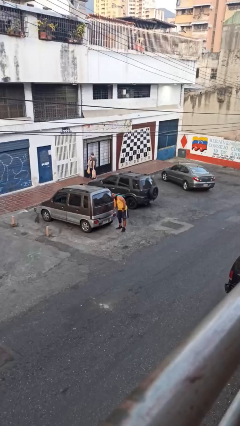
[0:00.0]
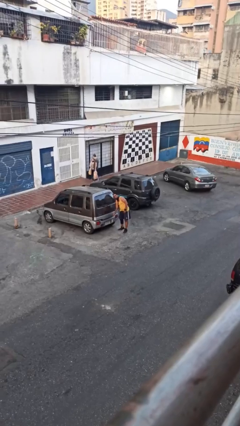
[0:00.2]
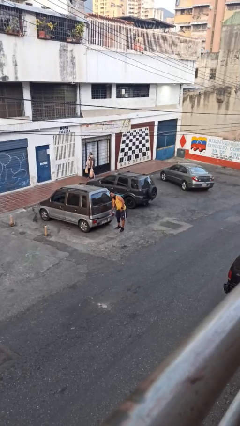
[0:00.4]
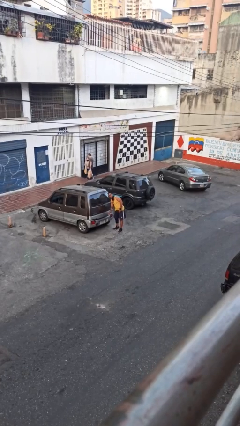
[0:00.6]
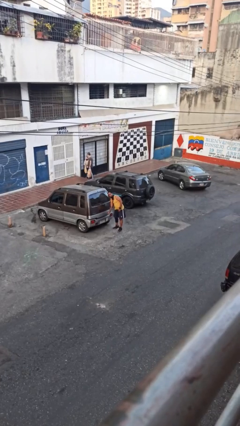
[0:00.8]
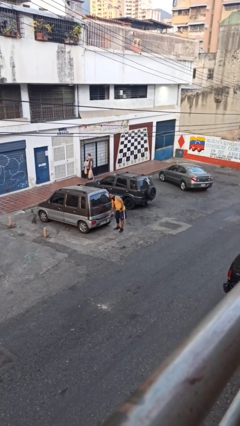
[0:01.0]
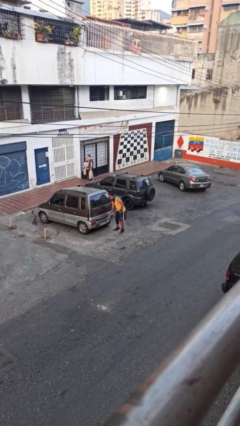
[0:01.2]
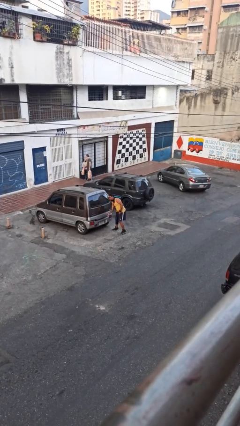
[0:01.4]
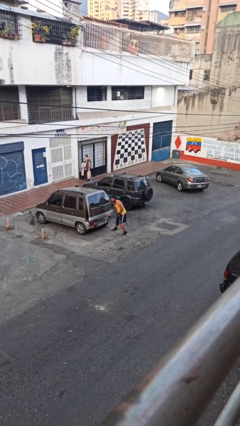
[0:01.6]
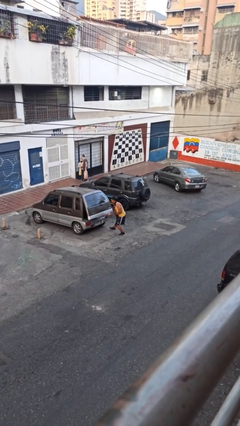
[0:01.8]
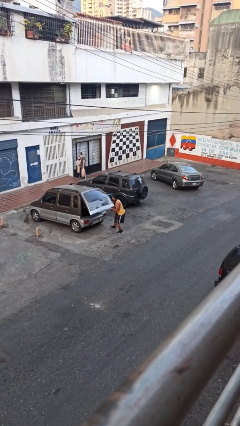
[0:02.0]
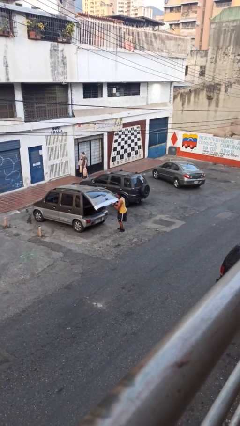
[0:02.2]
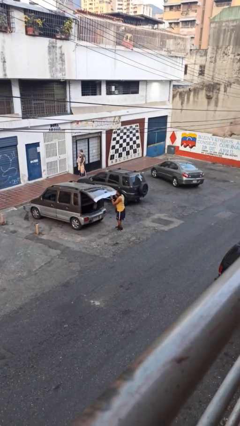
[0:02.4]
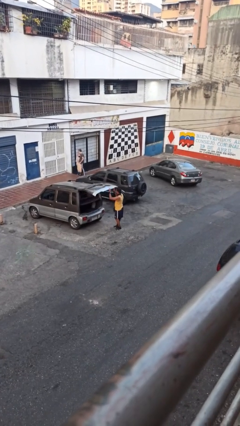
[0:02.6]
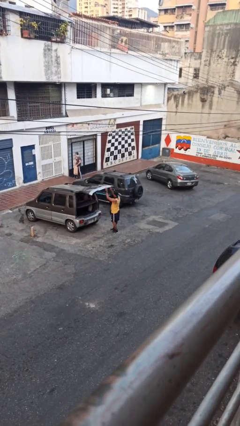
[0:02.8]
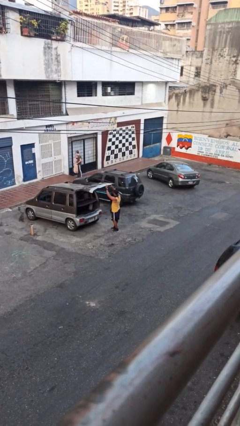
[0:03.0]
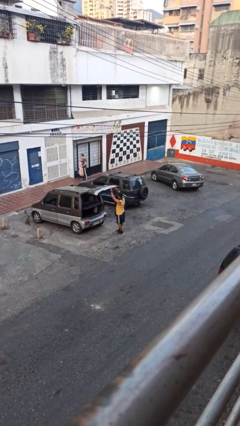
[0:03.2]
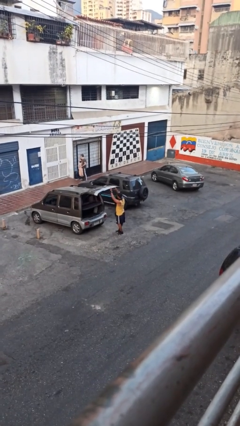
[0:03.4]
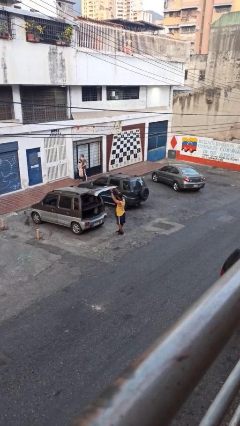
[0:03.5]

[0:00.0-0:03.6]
person opens car trunk

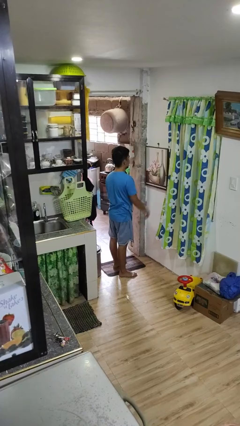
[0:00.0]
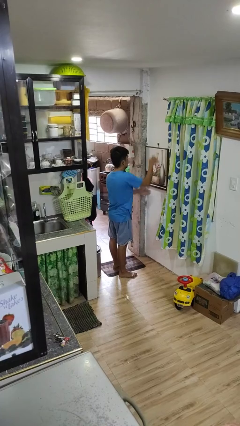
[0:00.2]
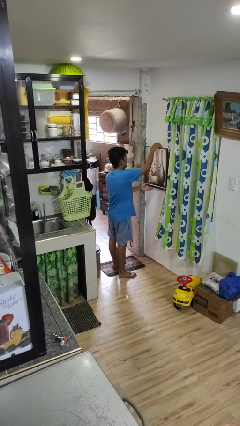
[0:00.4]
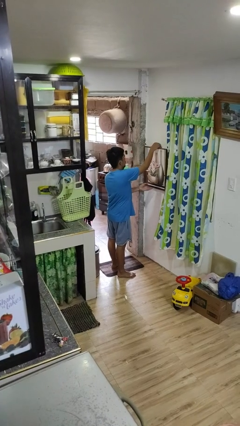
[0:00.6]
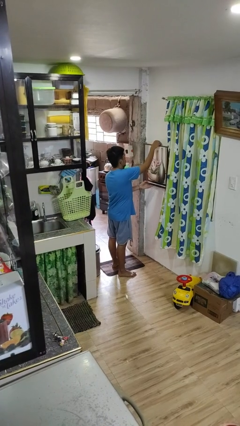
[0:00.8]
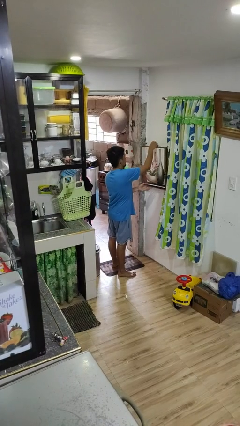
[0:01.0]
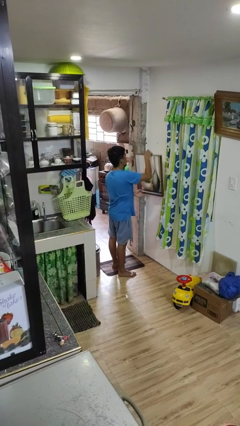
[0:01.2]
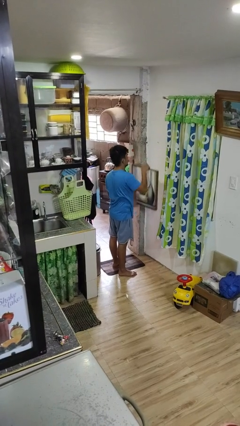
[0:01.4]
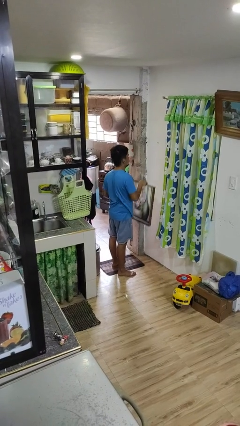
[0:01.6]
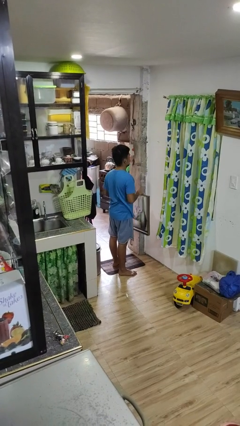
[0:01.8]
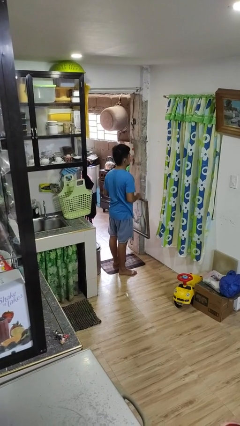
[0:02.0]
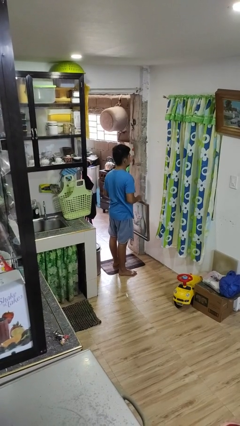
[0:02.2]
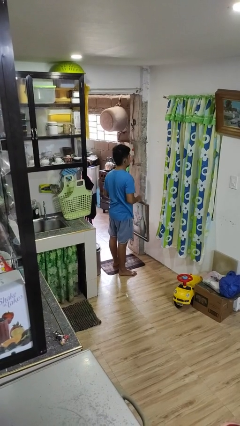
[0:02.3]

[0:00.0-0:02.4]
person takes down picture frame

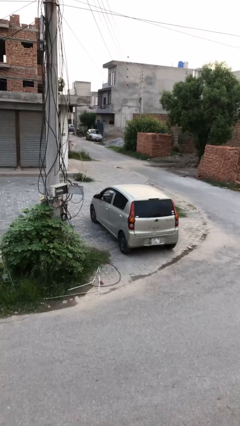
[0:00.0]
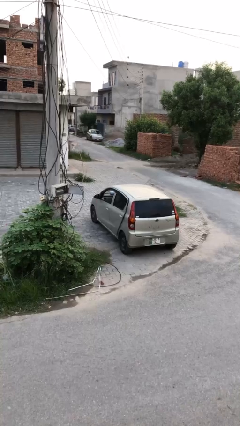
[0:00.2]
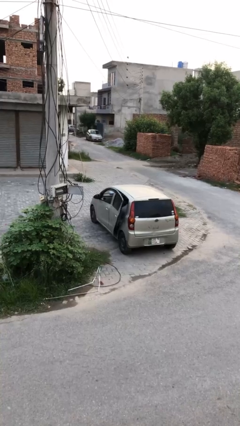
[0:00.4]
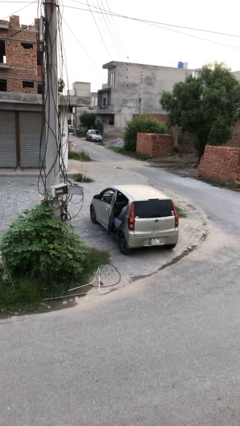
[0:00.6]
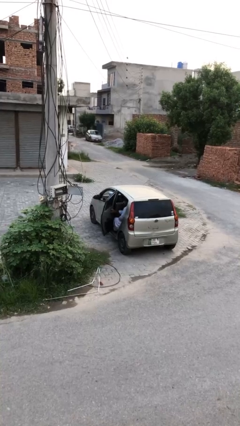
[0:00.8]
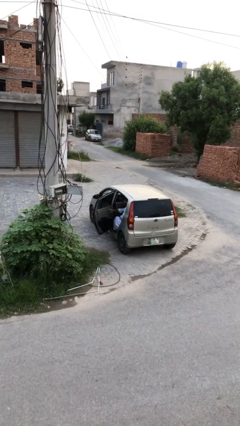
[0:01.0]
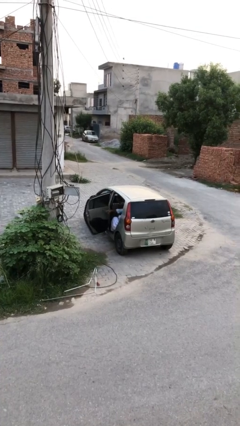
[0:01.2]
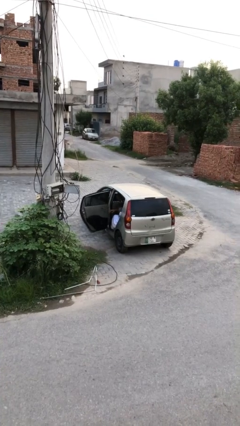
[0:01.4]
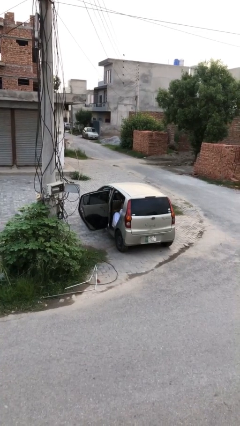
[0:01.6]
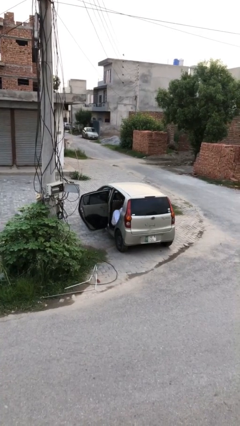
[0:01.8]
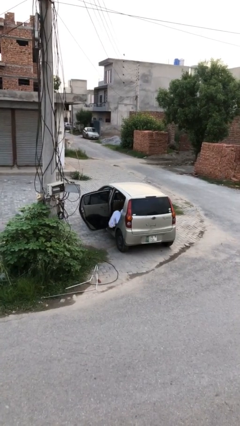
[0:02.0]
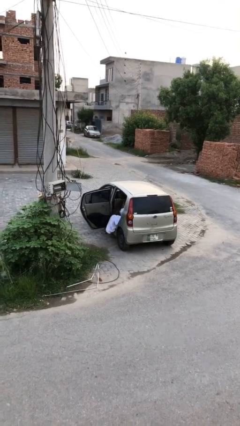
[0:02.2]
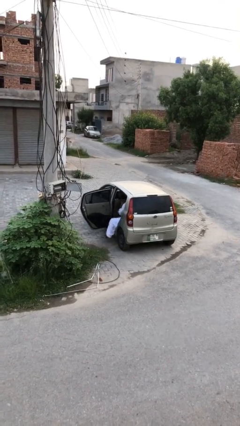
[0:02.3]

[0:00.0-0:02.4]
person opens car door

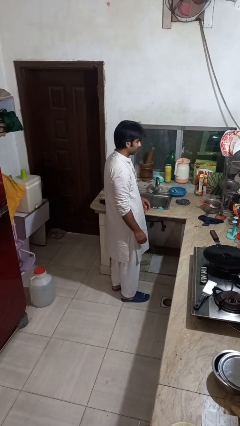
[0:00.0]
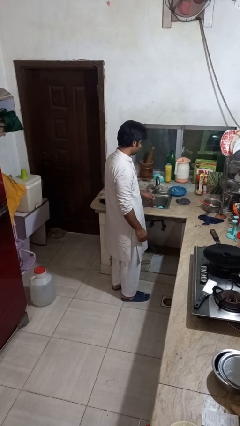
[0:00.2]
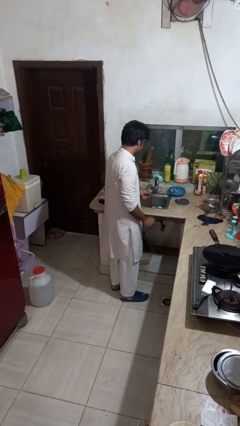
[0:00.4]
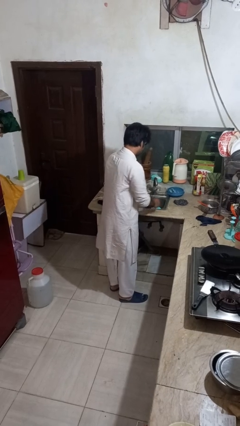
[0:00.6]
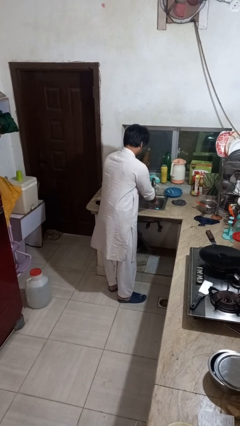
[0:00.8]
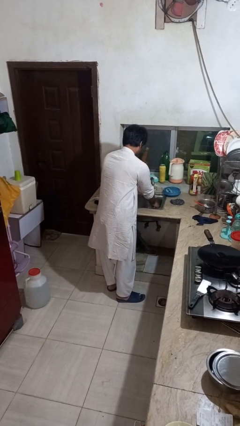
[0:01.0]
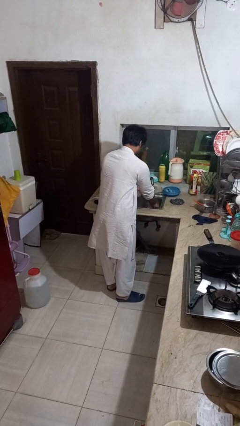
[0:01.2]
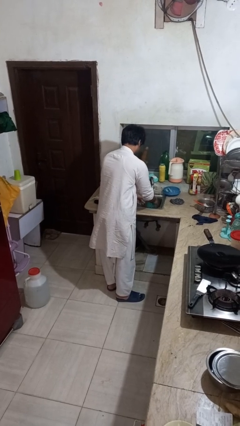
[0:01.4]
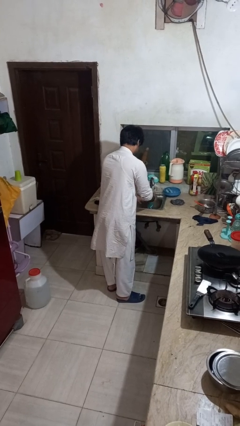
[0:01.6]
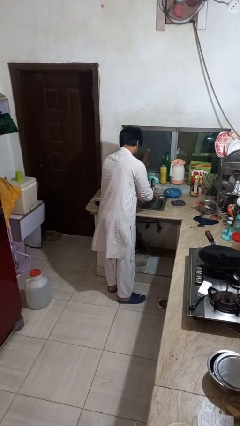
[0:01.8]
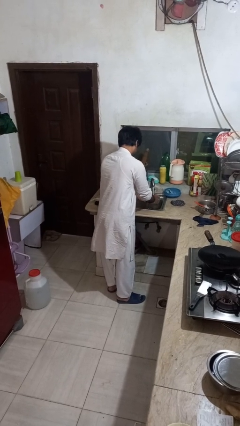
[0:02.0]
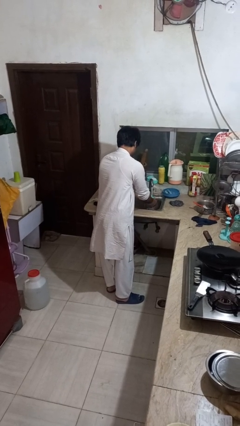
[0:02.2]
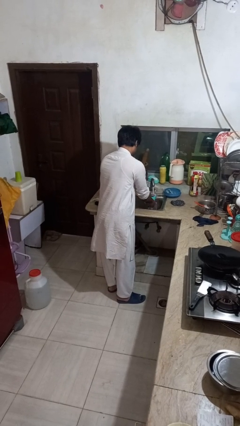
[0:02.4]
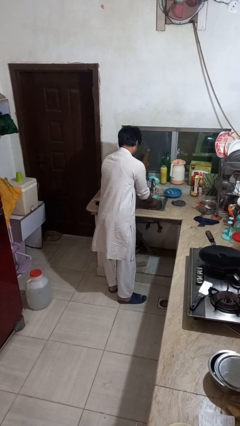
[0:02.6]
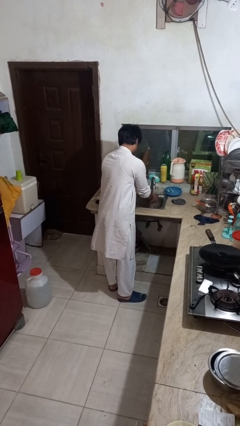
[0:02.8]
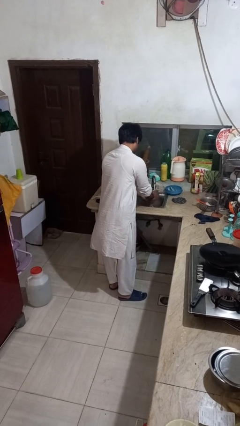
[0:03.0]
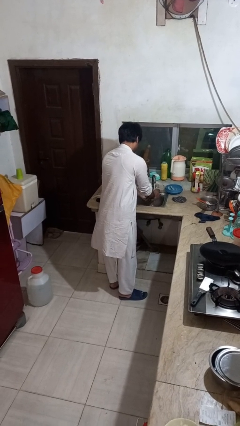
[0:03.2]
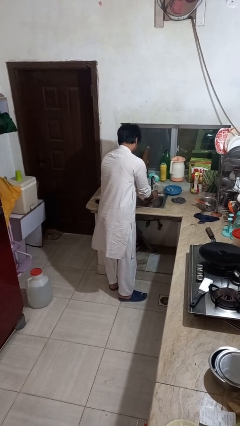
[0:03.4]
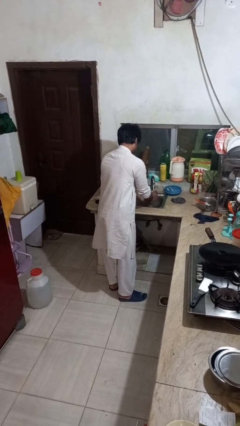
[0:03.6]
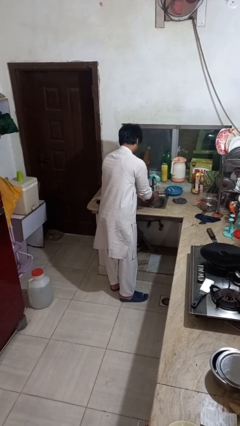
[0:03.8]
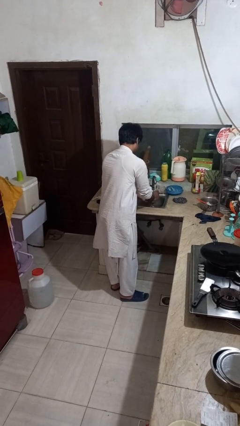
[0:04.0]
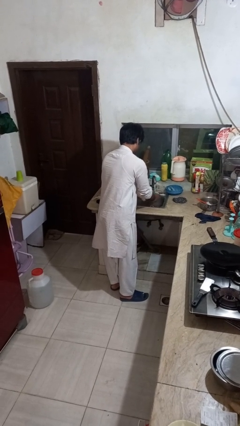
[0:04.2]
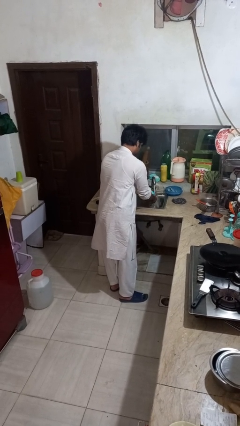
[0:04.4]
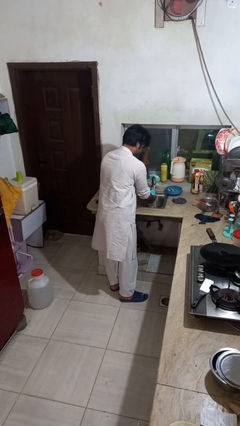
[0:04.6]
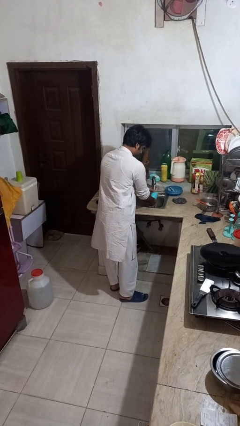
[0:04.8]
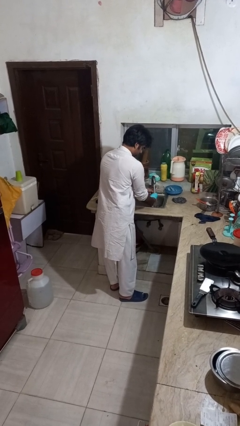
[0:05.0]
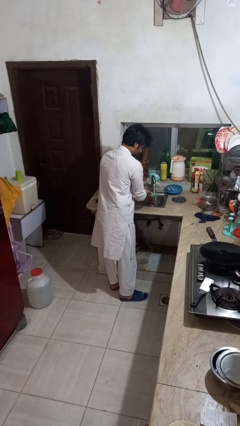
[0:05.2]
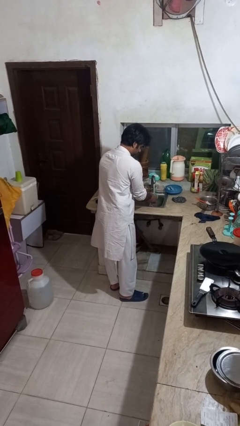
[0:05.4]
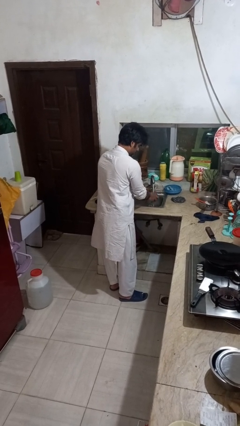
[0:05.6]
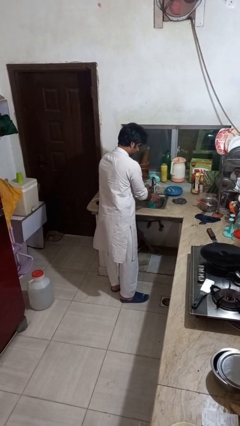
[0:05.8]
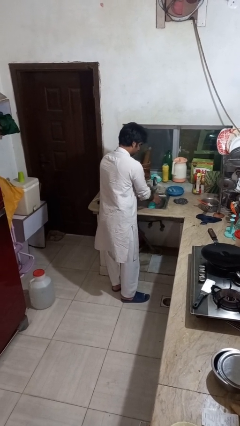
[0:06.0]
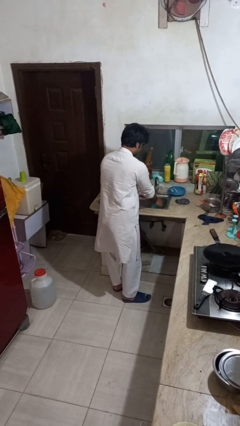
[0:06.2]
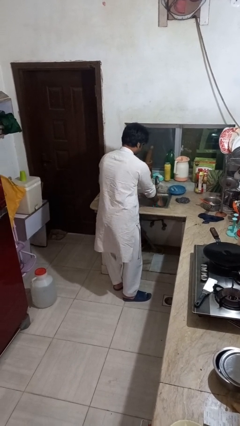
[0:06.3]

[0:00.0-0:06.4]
person washes dish

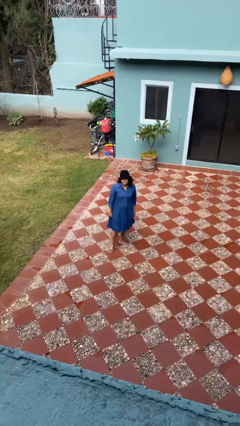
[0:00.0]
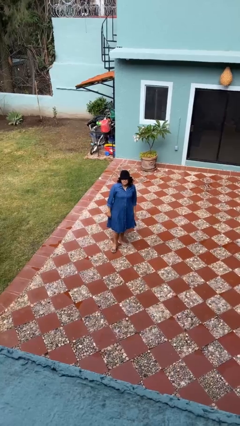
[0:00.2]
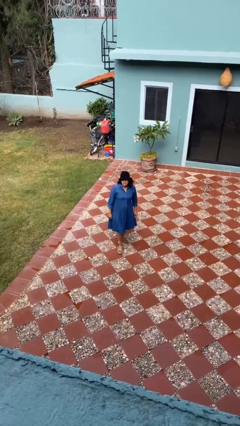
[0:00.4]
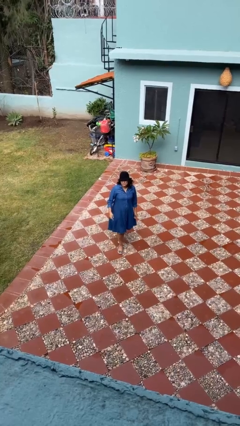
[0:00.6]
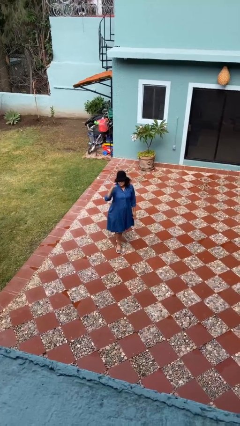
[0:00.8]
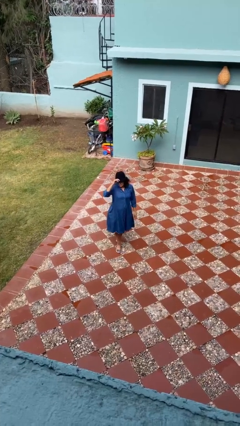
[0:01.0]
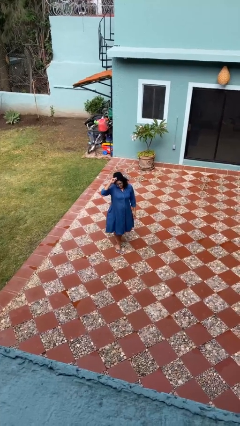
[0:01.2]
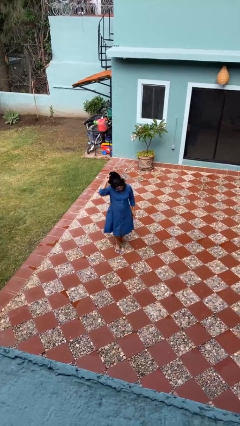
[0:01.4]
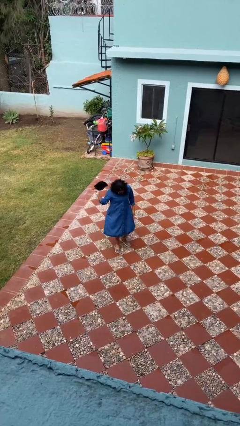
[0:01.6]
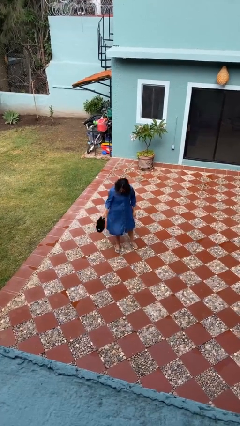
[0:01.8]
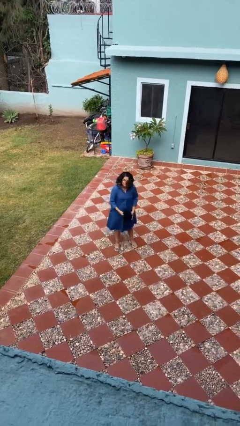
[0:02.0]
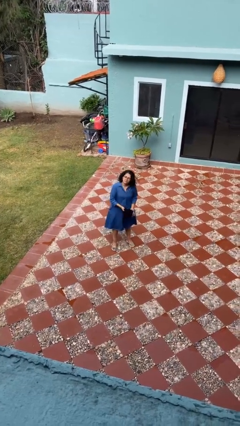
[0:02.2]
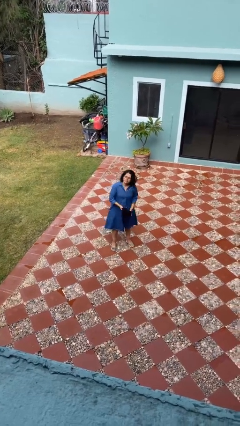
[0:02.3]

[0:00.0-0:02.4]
person takes off hat

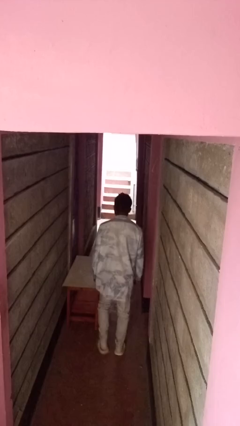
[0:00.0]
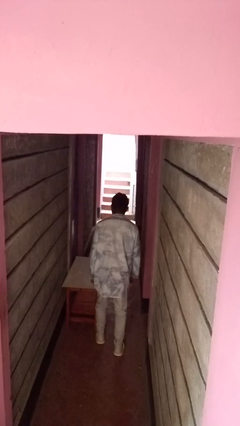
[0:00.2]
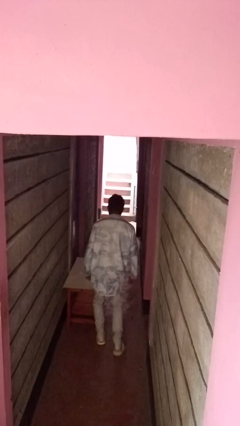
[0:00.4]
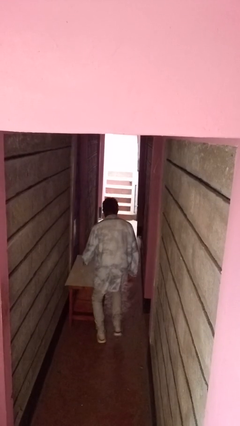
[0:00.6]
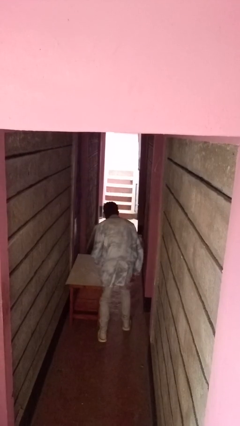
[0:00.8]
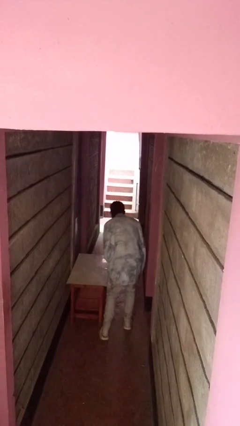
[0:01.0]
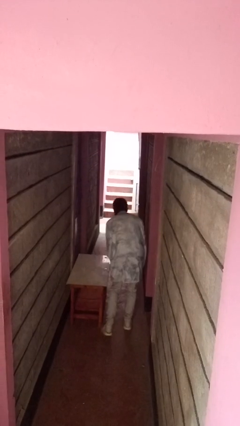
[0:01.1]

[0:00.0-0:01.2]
person bumps into table
